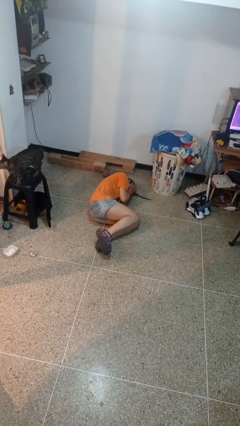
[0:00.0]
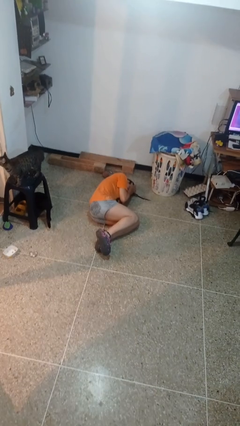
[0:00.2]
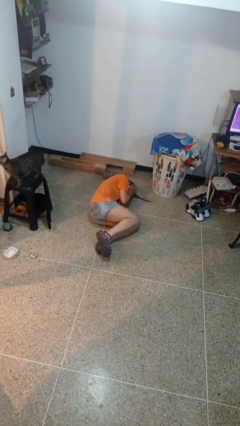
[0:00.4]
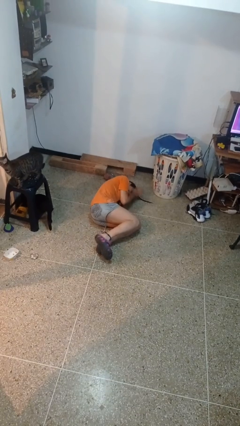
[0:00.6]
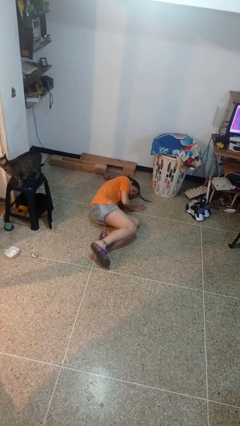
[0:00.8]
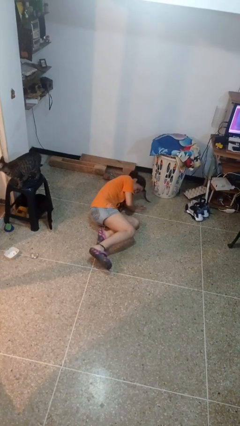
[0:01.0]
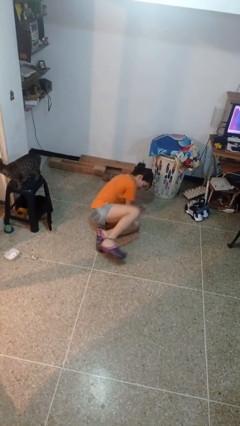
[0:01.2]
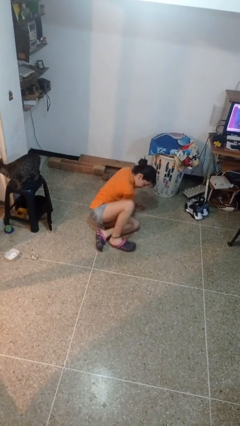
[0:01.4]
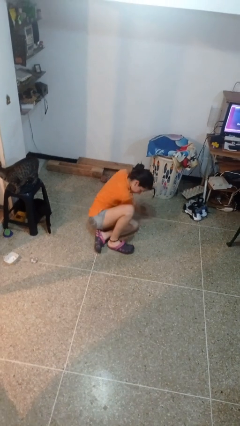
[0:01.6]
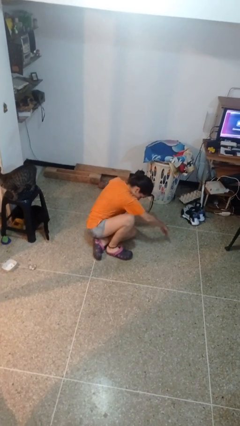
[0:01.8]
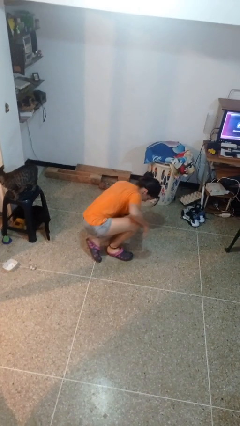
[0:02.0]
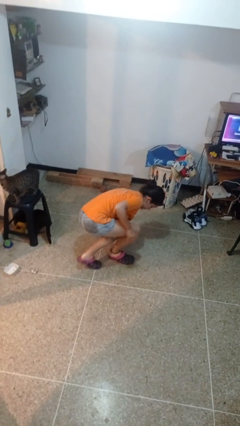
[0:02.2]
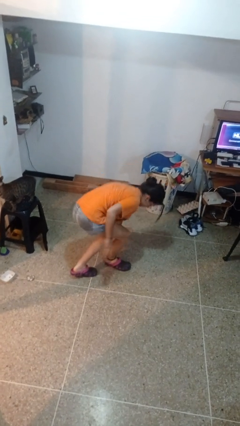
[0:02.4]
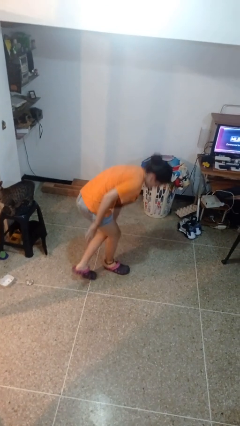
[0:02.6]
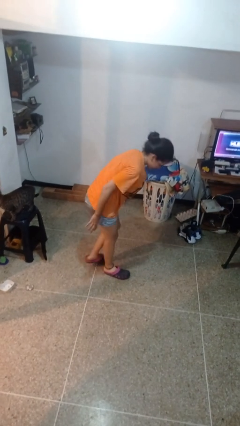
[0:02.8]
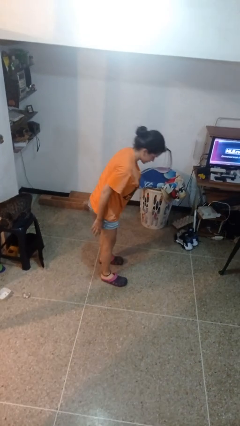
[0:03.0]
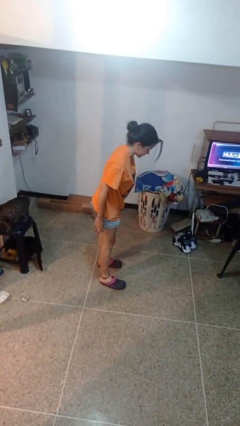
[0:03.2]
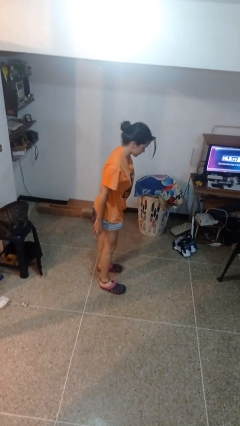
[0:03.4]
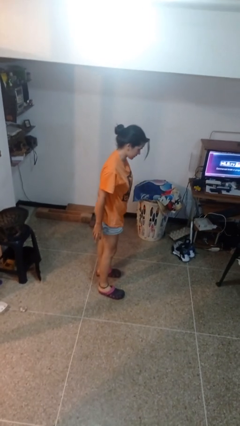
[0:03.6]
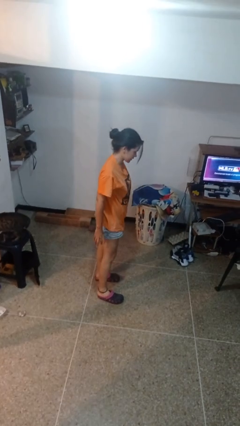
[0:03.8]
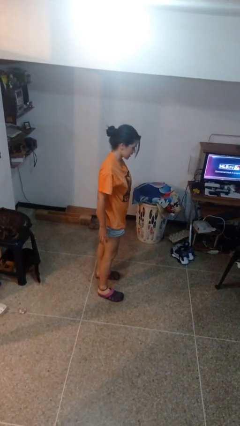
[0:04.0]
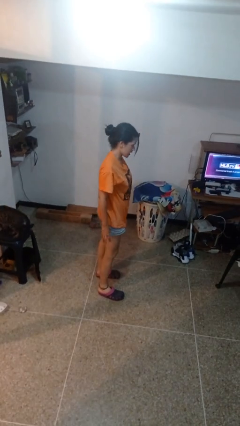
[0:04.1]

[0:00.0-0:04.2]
person stands up from floor

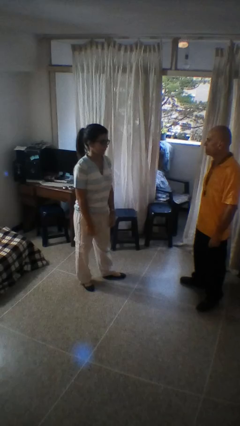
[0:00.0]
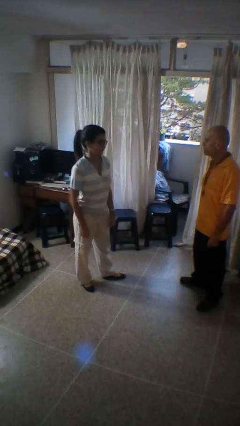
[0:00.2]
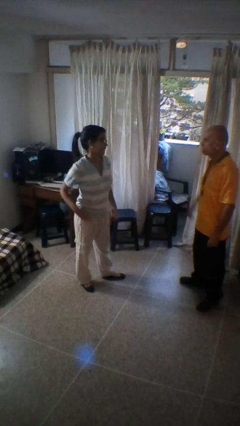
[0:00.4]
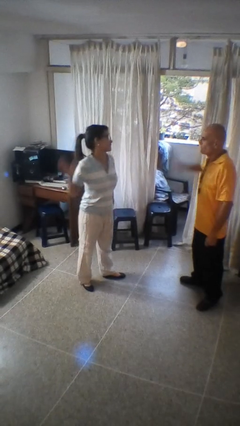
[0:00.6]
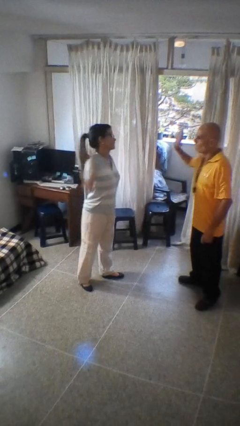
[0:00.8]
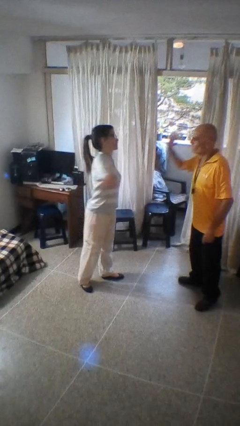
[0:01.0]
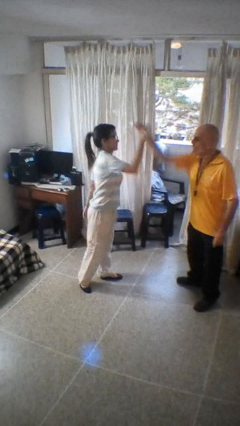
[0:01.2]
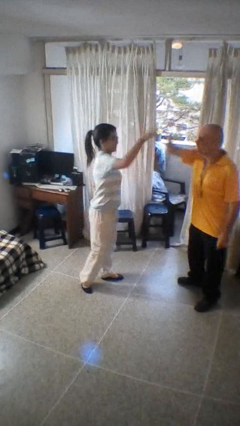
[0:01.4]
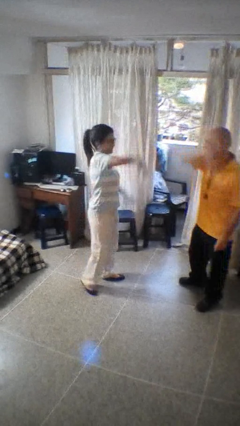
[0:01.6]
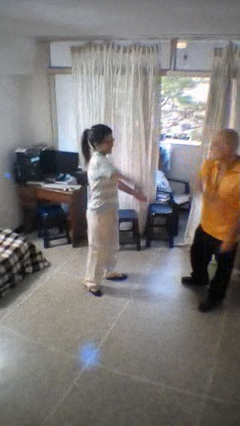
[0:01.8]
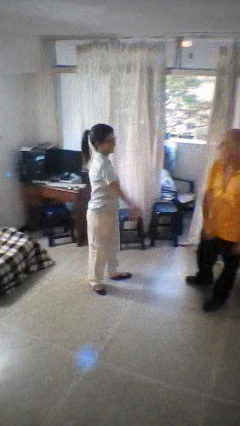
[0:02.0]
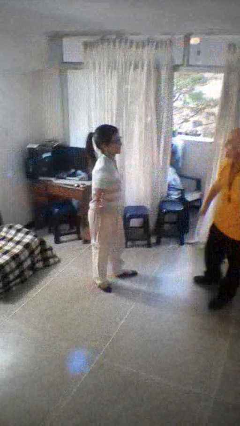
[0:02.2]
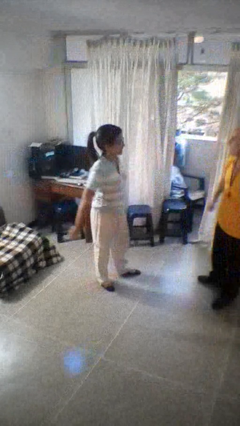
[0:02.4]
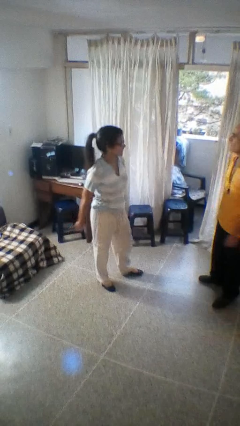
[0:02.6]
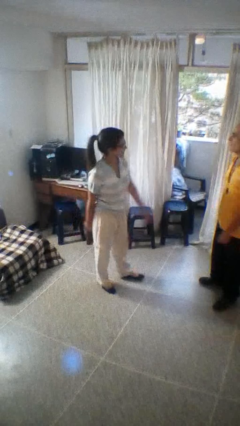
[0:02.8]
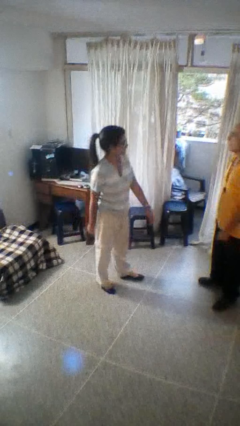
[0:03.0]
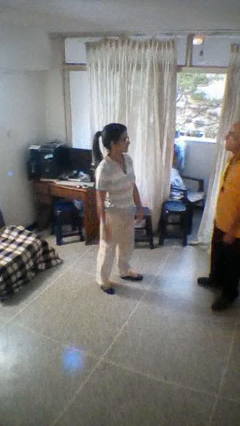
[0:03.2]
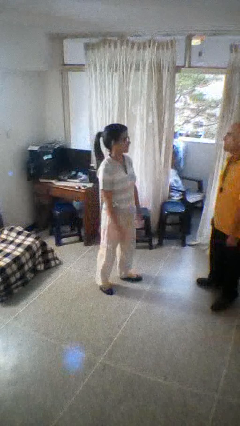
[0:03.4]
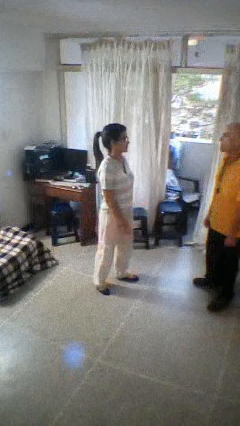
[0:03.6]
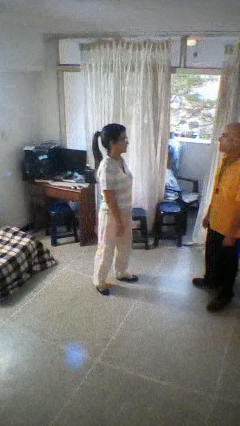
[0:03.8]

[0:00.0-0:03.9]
person highfives hand

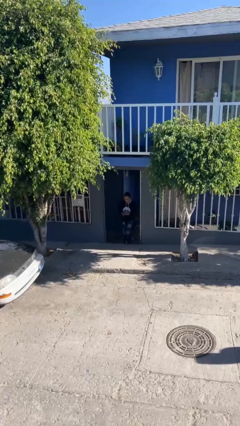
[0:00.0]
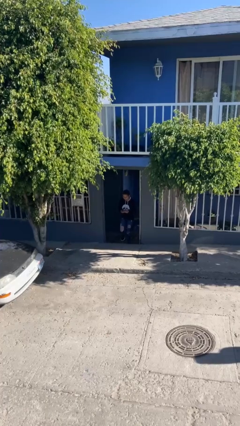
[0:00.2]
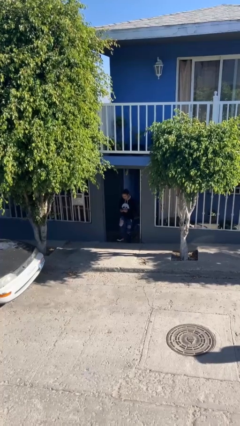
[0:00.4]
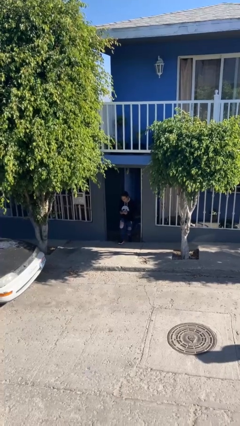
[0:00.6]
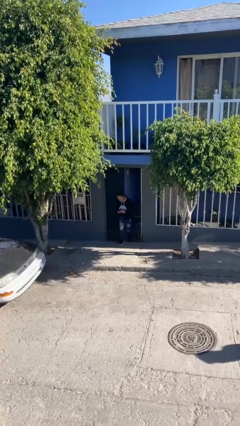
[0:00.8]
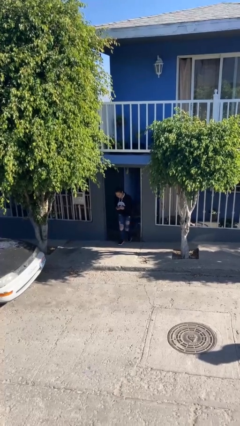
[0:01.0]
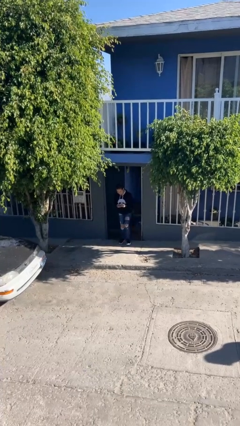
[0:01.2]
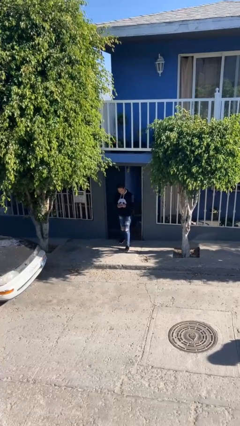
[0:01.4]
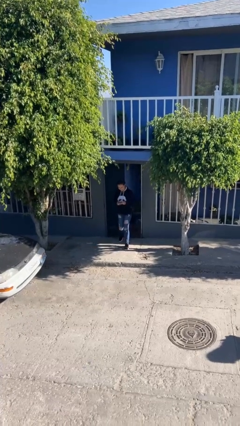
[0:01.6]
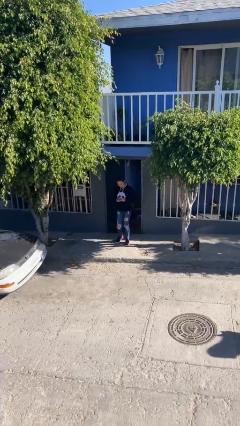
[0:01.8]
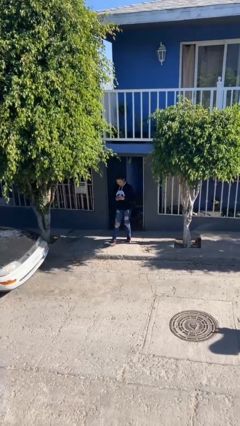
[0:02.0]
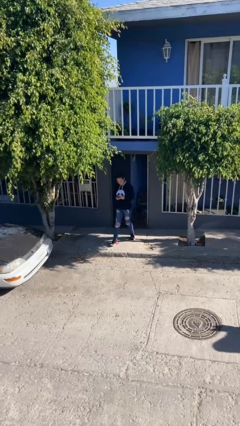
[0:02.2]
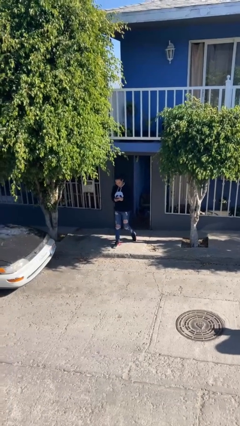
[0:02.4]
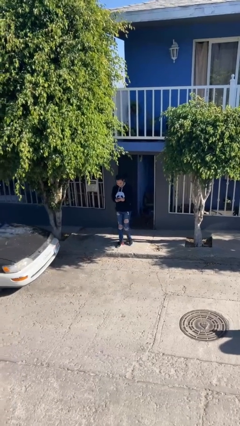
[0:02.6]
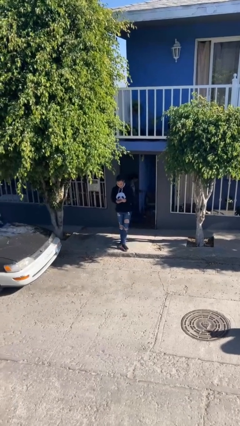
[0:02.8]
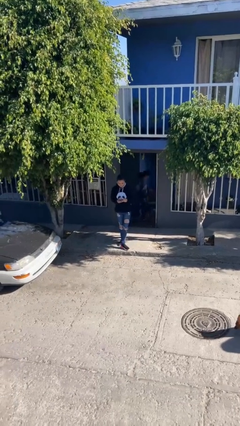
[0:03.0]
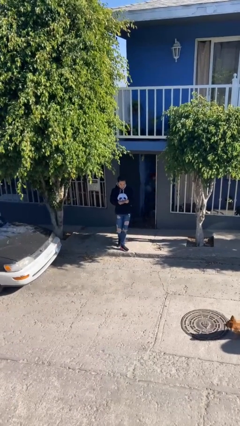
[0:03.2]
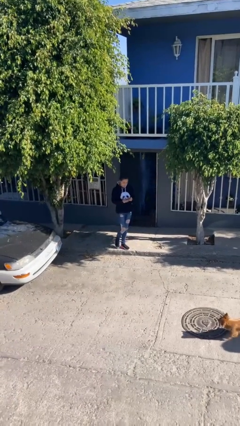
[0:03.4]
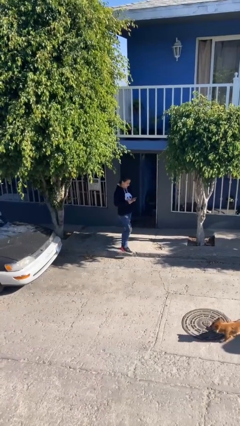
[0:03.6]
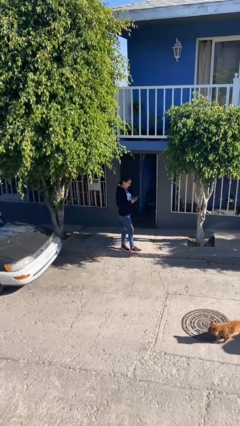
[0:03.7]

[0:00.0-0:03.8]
person enters scene through structure

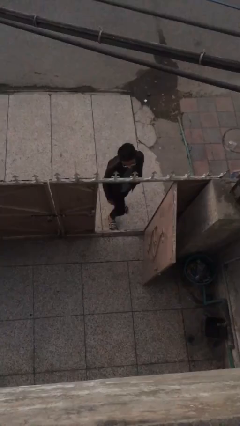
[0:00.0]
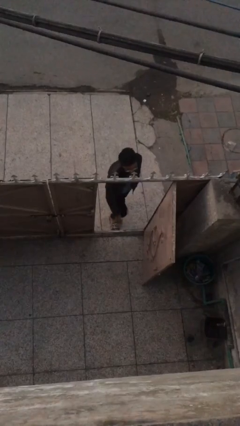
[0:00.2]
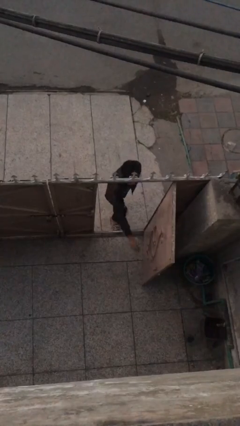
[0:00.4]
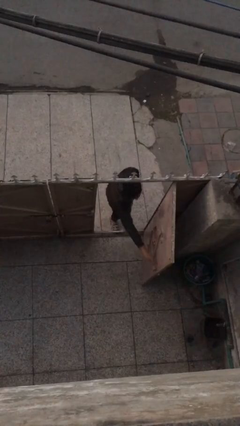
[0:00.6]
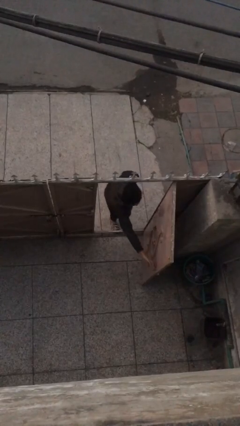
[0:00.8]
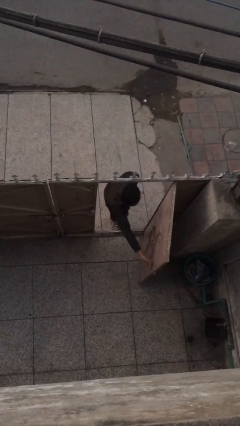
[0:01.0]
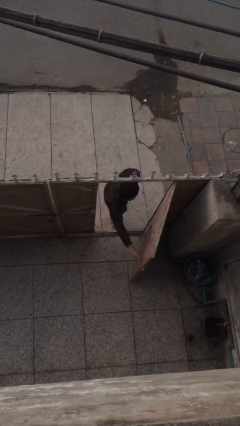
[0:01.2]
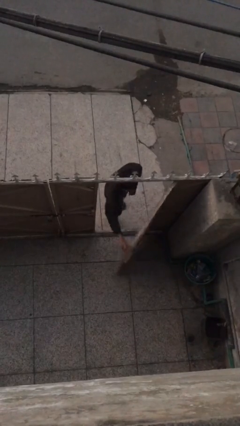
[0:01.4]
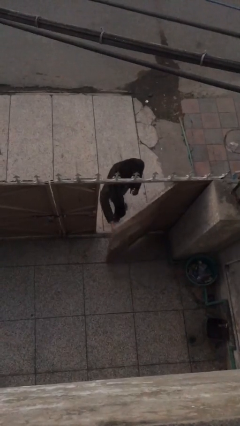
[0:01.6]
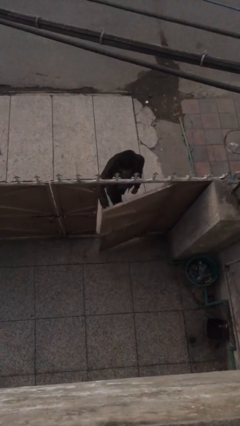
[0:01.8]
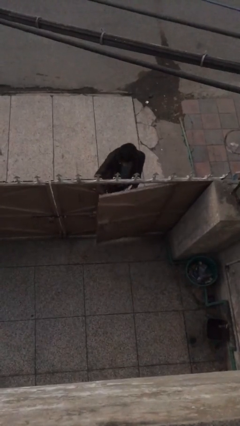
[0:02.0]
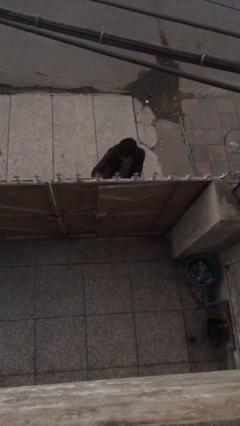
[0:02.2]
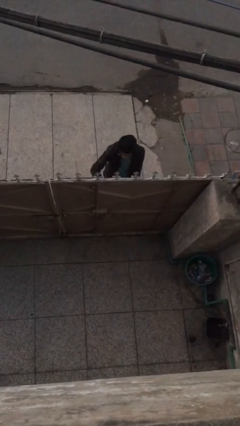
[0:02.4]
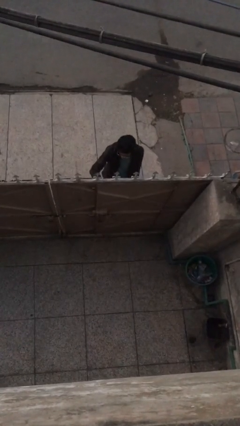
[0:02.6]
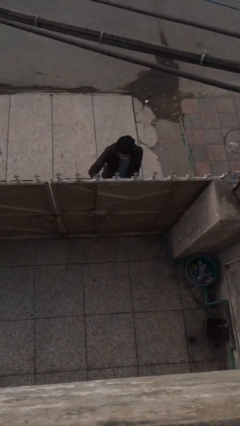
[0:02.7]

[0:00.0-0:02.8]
person closes facility door

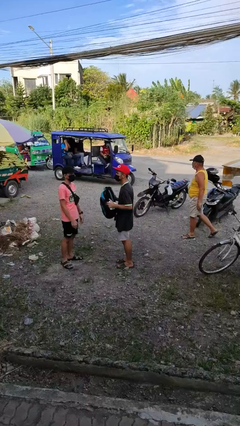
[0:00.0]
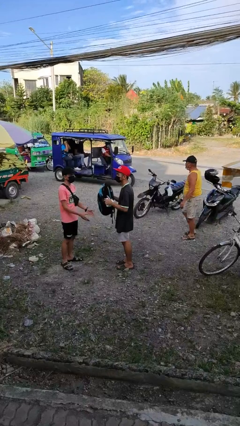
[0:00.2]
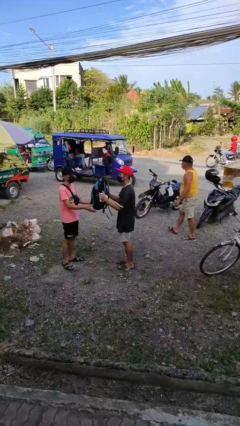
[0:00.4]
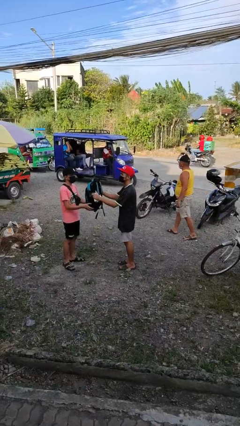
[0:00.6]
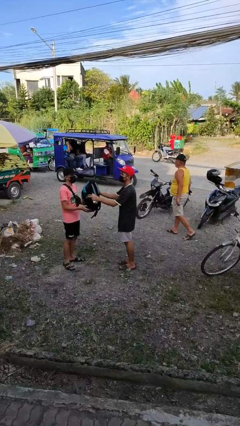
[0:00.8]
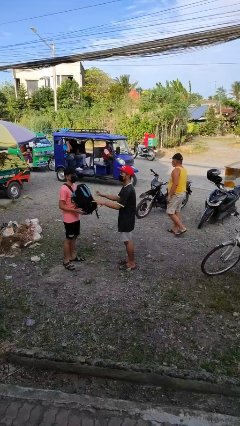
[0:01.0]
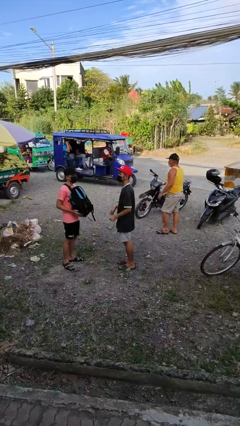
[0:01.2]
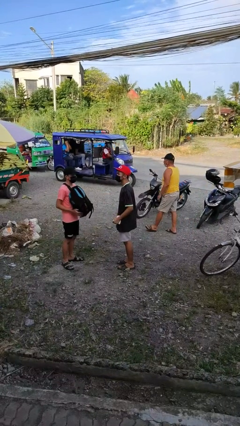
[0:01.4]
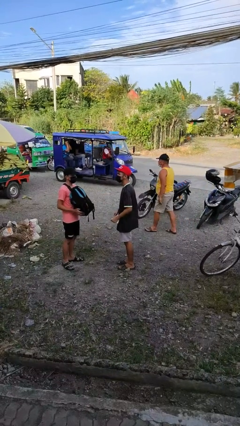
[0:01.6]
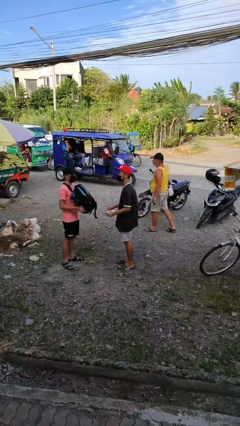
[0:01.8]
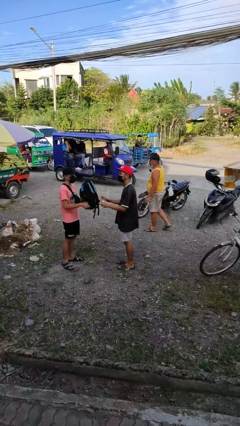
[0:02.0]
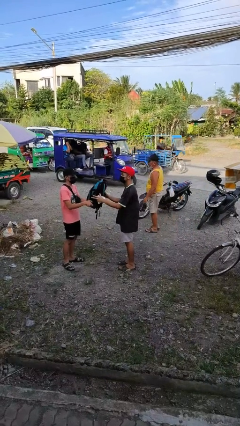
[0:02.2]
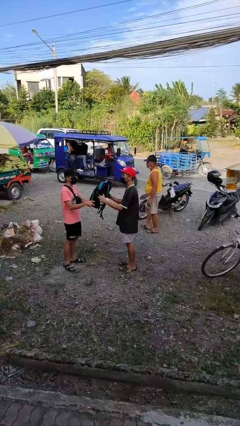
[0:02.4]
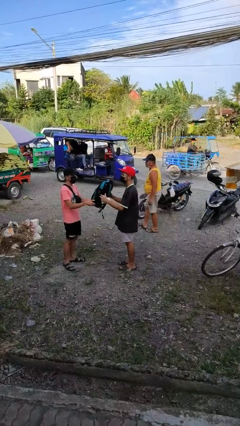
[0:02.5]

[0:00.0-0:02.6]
person transfers object to person

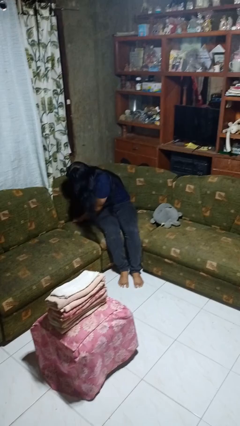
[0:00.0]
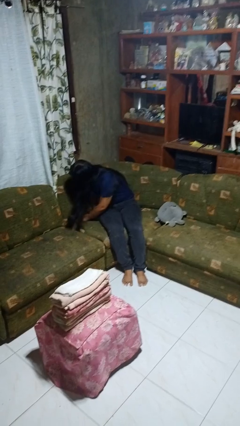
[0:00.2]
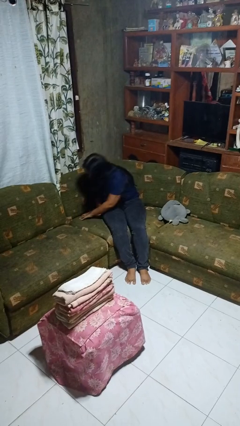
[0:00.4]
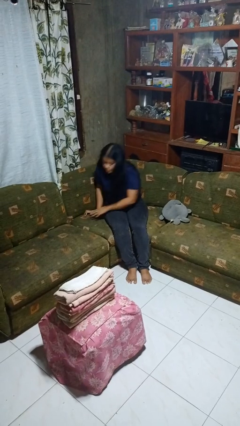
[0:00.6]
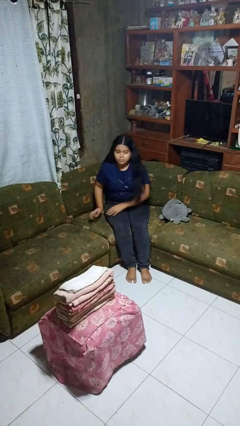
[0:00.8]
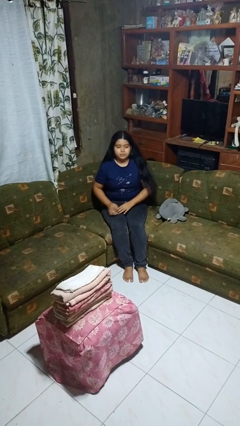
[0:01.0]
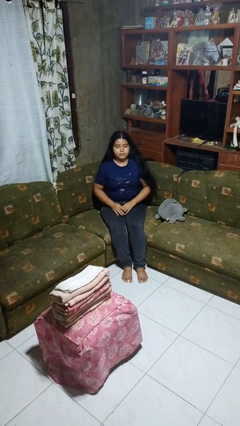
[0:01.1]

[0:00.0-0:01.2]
person searches in couch
